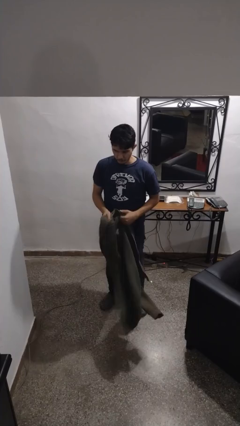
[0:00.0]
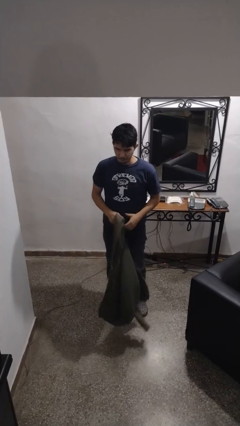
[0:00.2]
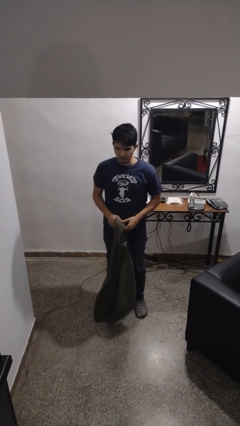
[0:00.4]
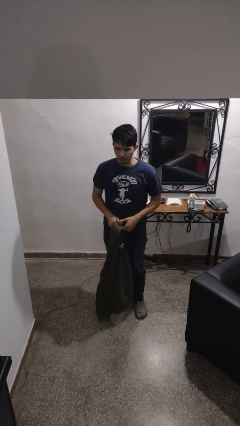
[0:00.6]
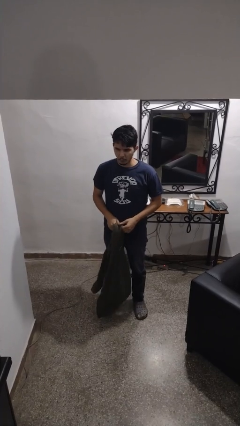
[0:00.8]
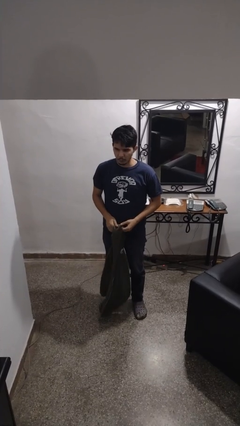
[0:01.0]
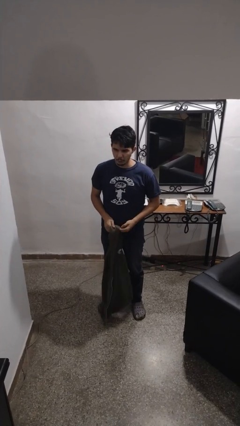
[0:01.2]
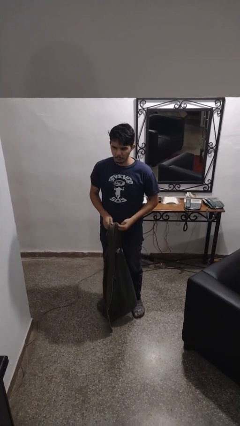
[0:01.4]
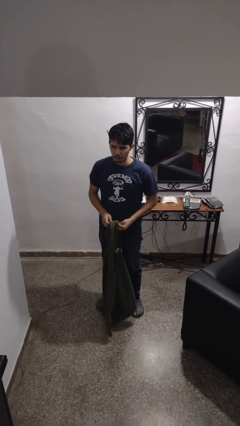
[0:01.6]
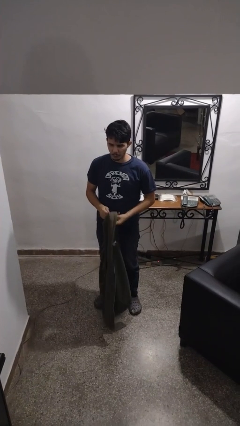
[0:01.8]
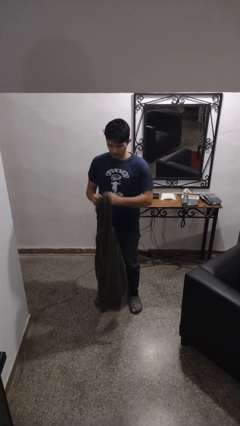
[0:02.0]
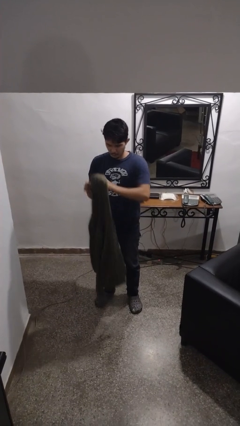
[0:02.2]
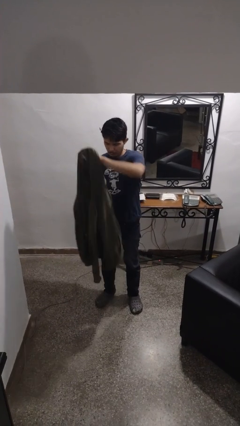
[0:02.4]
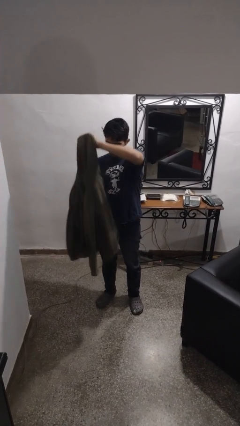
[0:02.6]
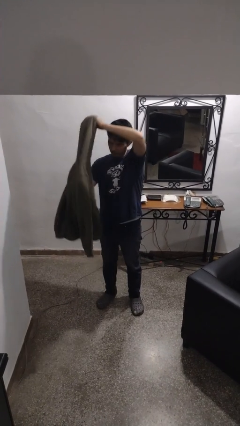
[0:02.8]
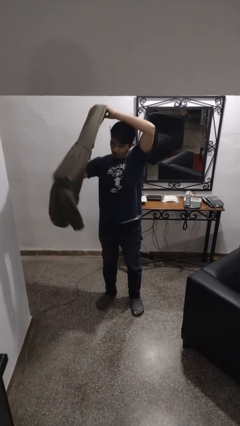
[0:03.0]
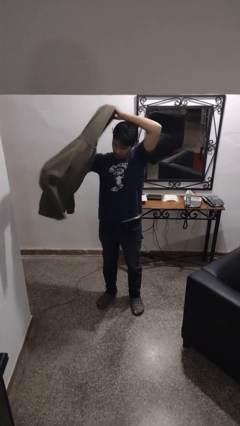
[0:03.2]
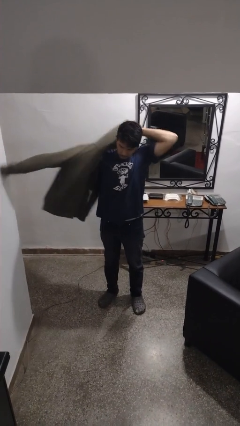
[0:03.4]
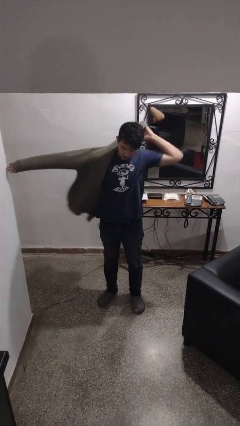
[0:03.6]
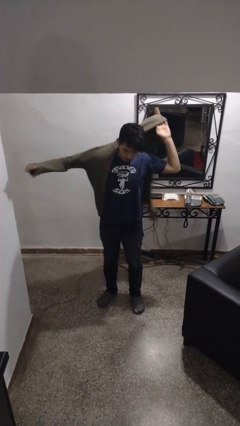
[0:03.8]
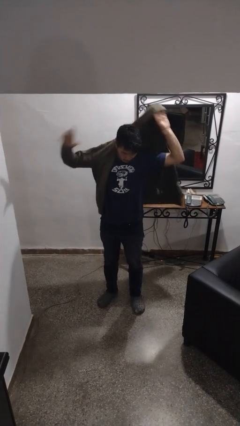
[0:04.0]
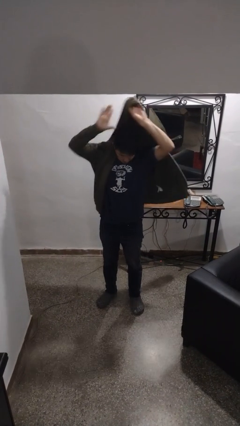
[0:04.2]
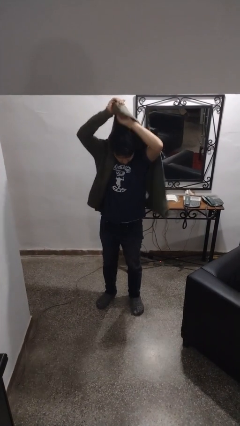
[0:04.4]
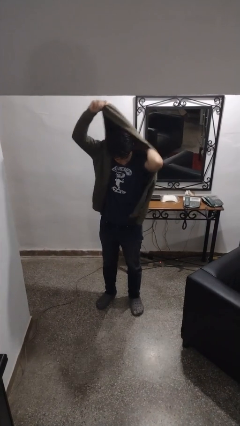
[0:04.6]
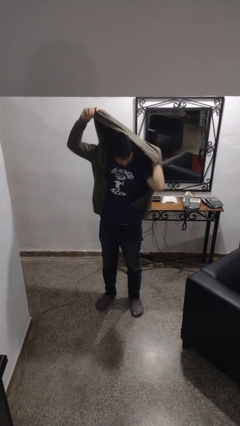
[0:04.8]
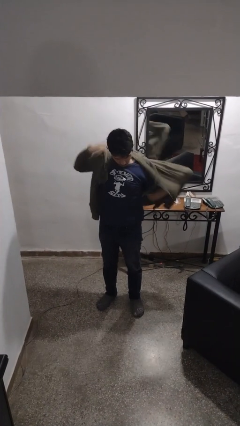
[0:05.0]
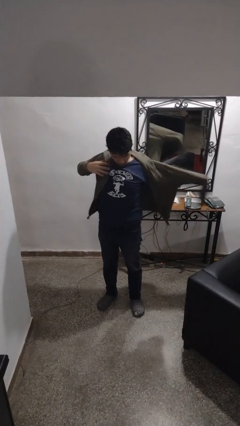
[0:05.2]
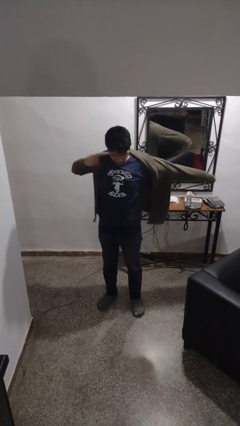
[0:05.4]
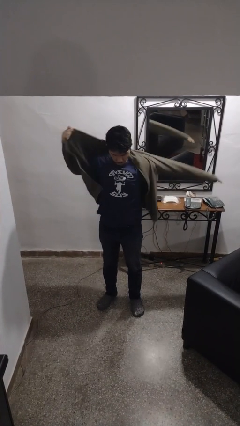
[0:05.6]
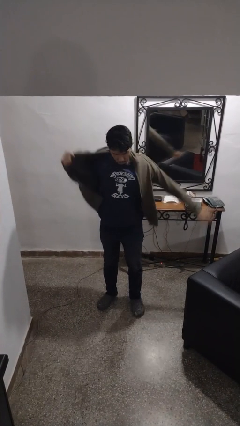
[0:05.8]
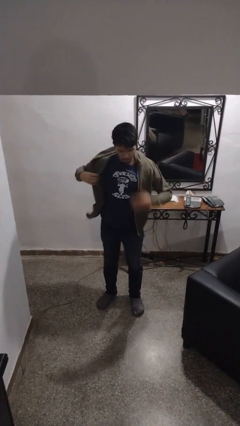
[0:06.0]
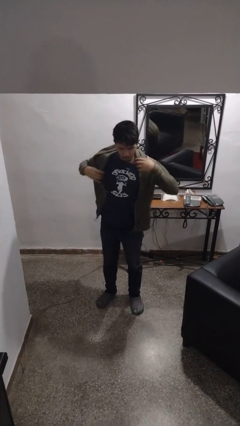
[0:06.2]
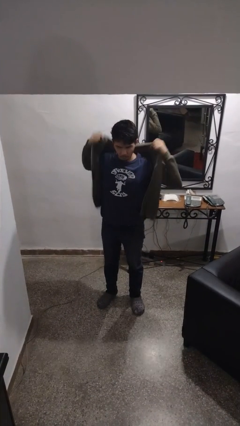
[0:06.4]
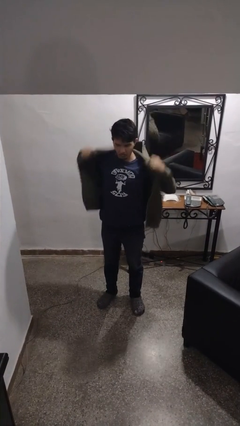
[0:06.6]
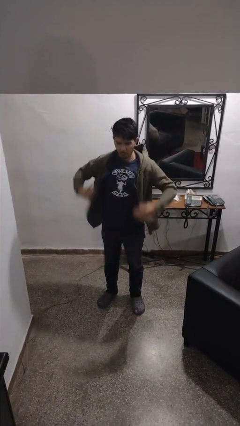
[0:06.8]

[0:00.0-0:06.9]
person puts on jacket

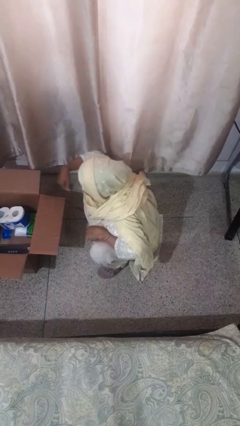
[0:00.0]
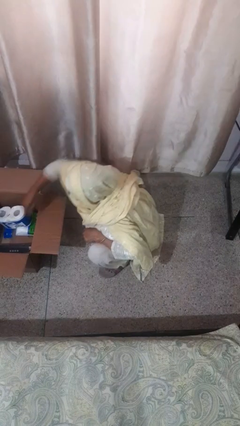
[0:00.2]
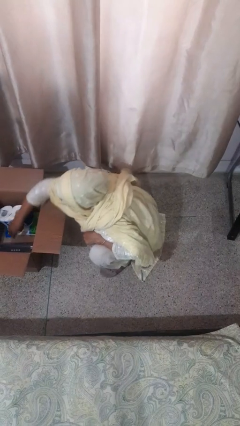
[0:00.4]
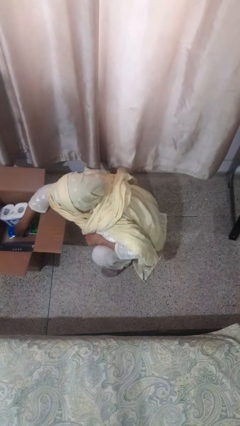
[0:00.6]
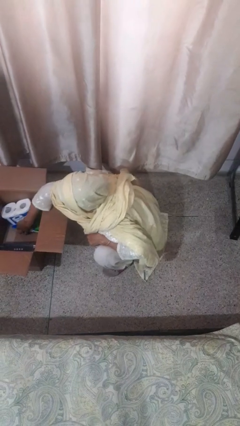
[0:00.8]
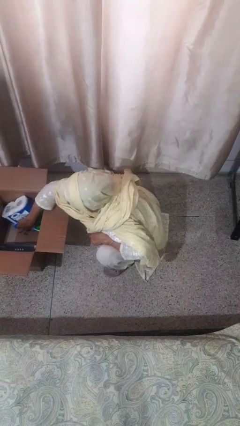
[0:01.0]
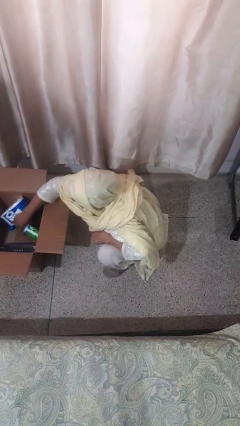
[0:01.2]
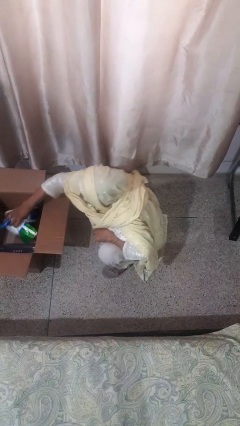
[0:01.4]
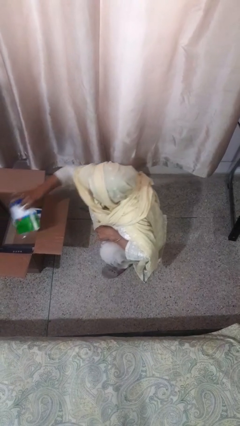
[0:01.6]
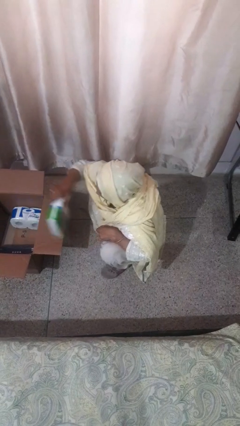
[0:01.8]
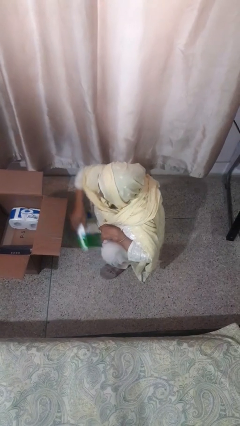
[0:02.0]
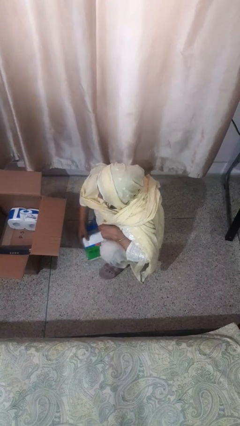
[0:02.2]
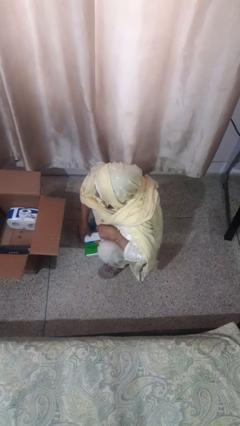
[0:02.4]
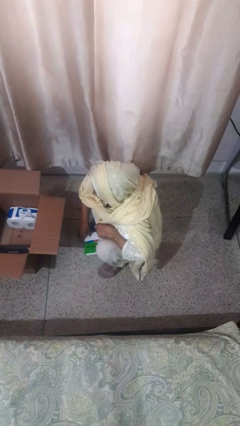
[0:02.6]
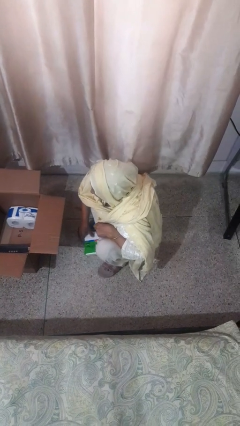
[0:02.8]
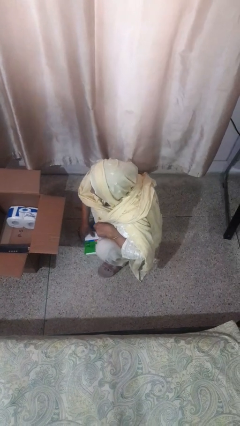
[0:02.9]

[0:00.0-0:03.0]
person takes object from box

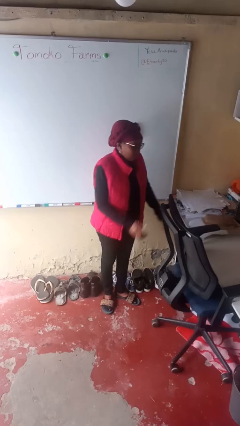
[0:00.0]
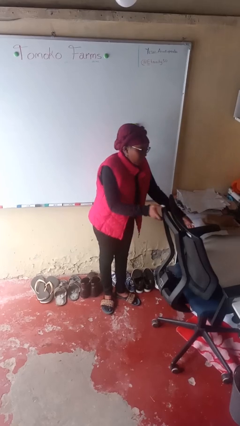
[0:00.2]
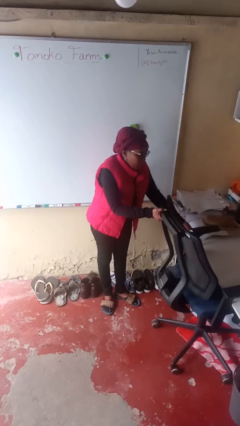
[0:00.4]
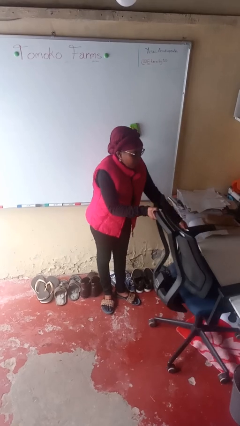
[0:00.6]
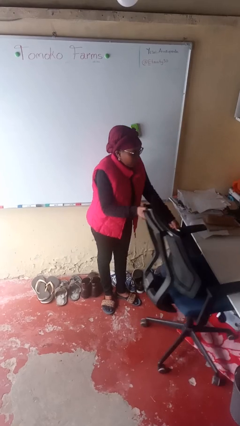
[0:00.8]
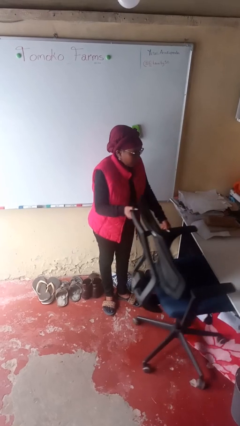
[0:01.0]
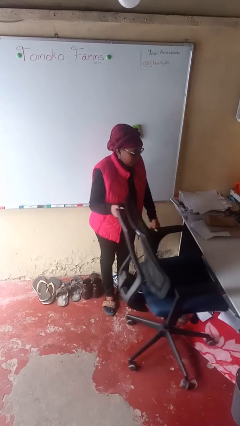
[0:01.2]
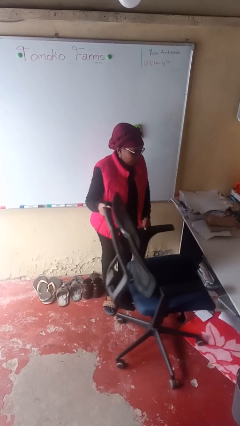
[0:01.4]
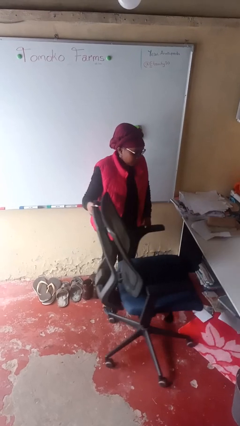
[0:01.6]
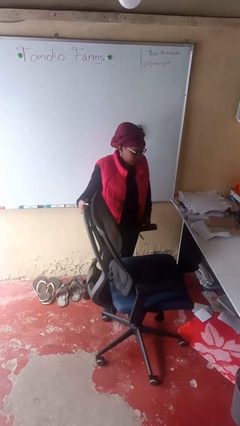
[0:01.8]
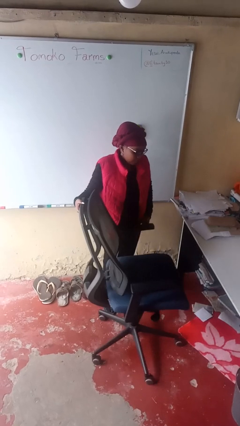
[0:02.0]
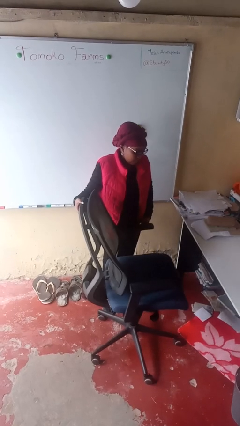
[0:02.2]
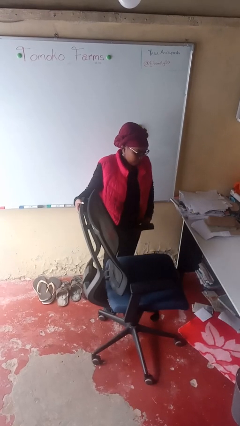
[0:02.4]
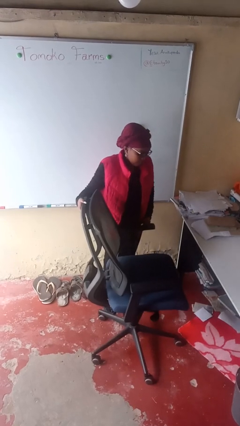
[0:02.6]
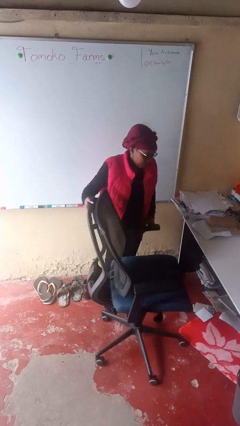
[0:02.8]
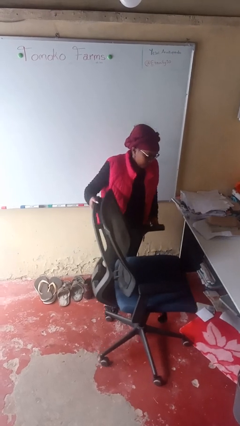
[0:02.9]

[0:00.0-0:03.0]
person pulls out chair

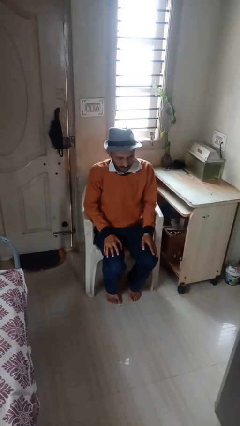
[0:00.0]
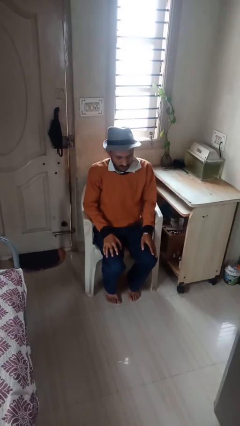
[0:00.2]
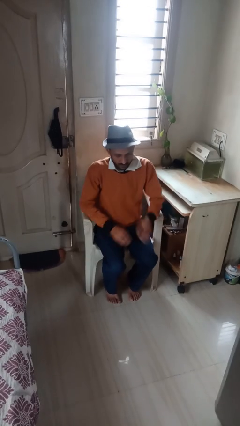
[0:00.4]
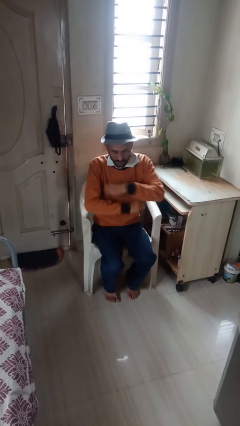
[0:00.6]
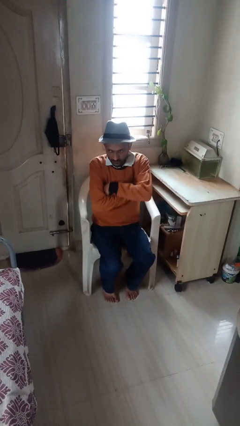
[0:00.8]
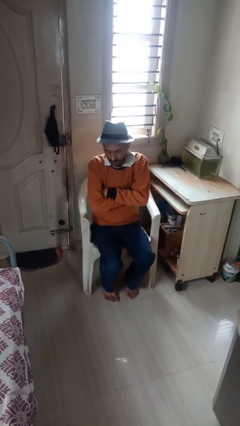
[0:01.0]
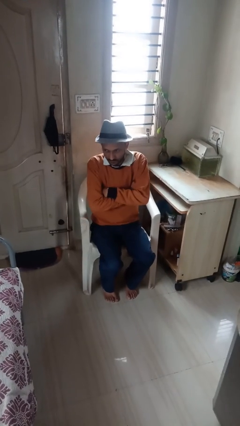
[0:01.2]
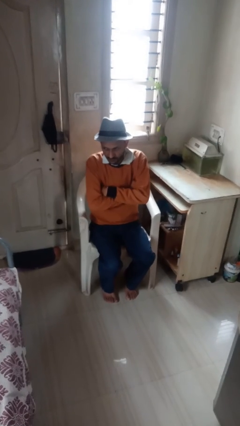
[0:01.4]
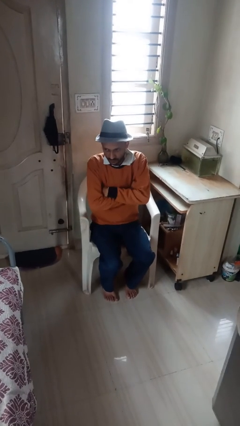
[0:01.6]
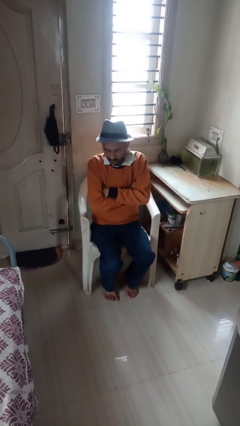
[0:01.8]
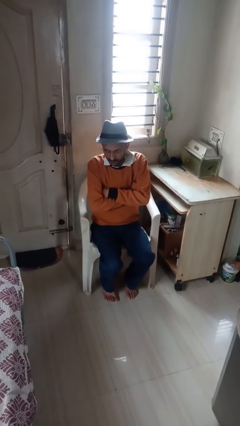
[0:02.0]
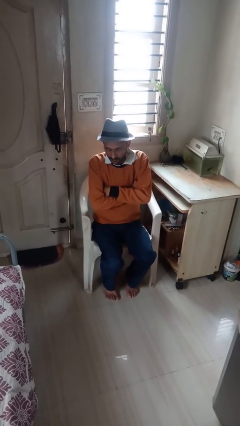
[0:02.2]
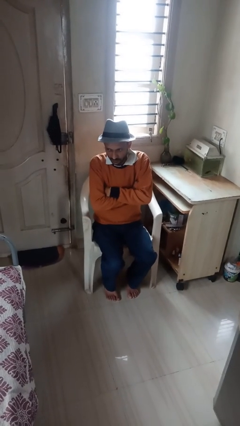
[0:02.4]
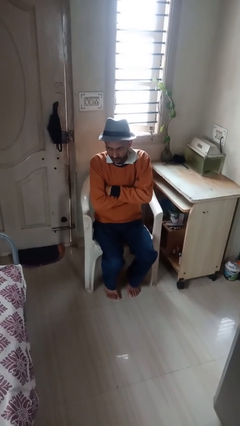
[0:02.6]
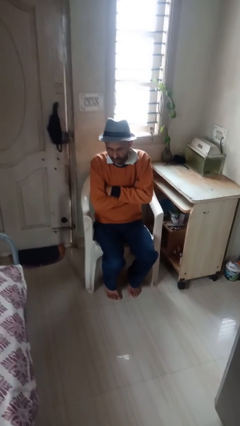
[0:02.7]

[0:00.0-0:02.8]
person crosses arms

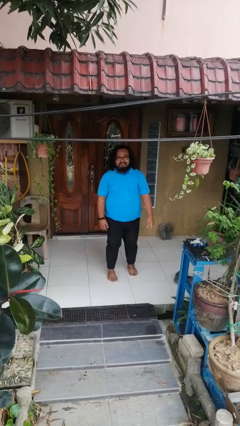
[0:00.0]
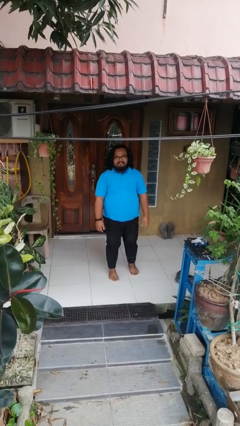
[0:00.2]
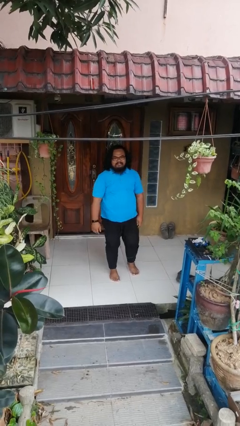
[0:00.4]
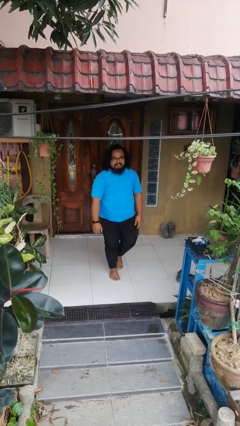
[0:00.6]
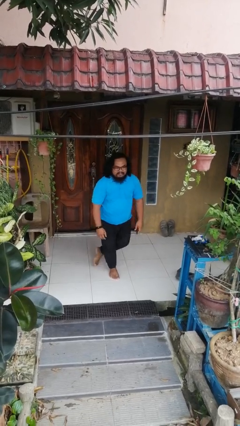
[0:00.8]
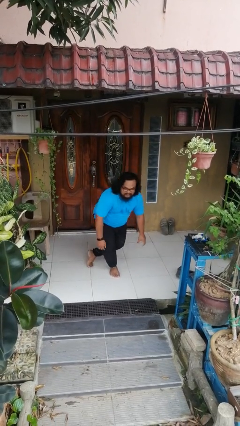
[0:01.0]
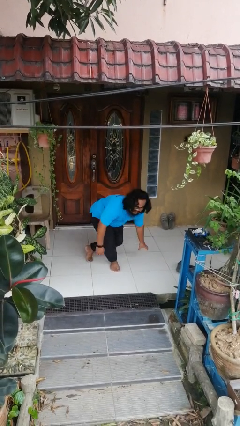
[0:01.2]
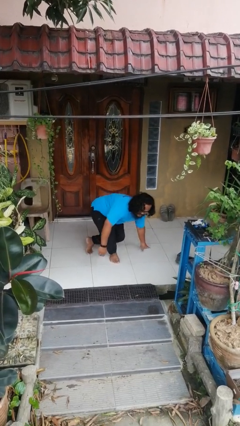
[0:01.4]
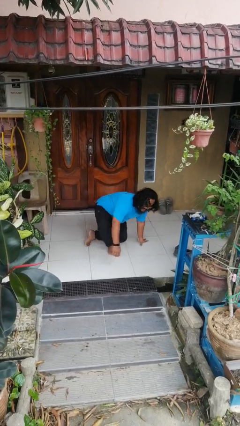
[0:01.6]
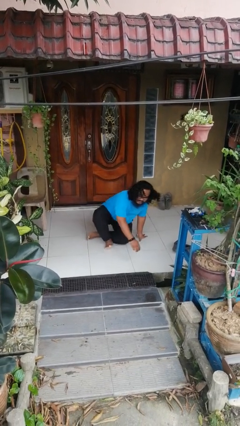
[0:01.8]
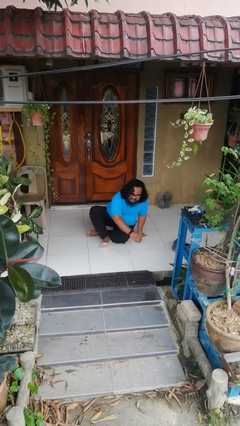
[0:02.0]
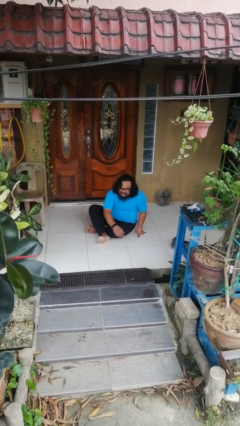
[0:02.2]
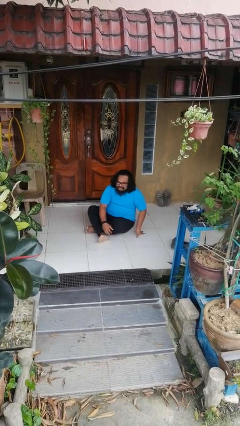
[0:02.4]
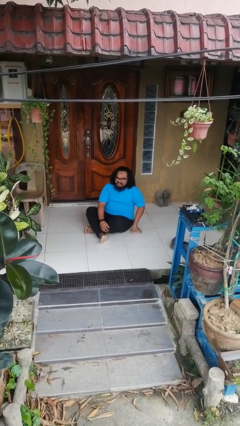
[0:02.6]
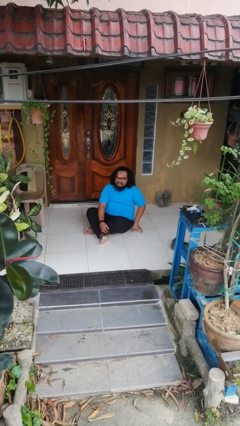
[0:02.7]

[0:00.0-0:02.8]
person sits crisscross
